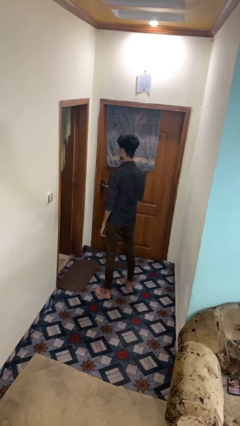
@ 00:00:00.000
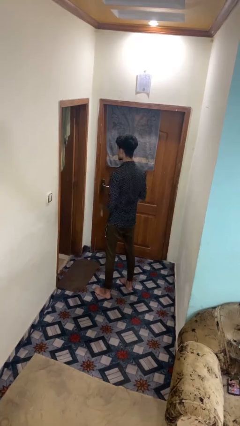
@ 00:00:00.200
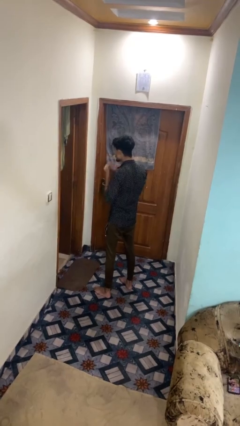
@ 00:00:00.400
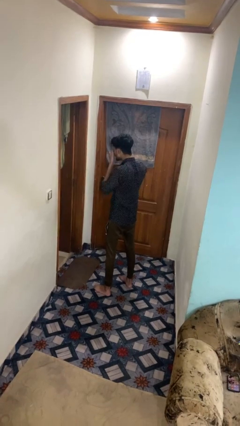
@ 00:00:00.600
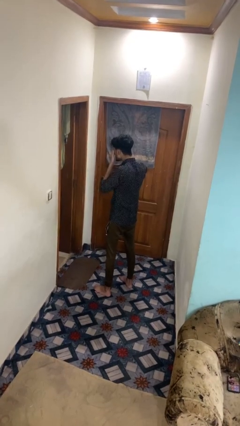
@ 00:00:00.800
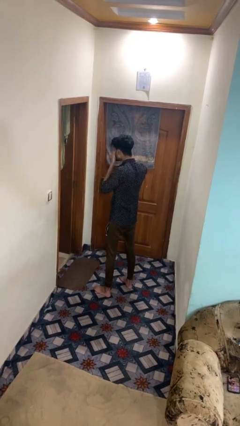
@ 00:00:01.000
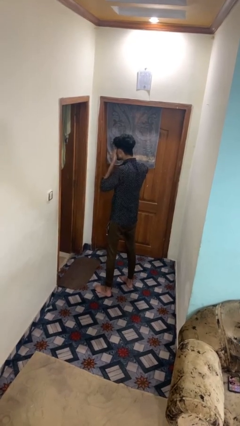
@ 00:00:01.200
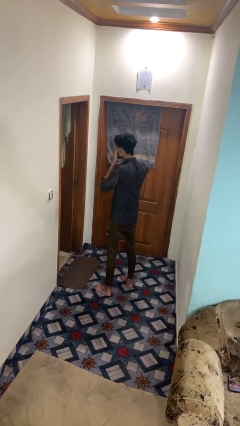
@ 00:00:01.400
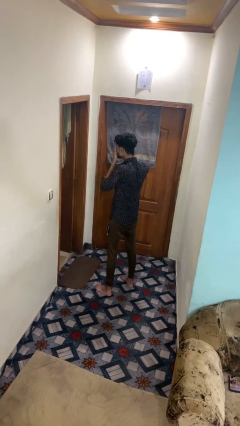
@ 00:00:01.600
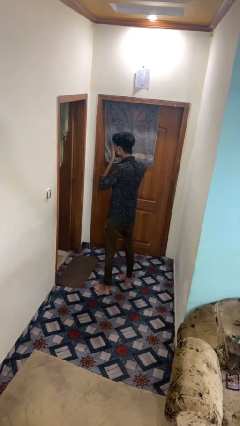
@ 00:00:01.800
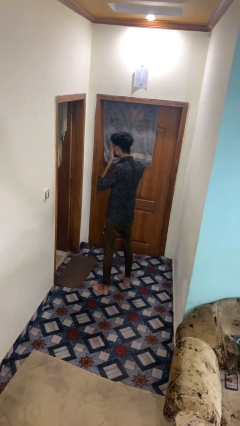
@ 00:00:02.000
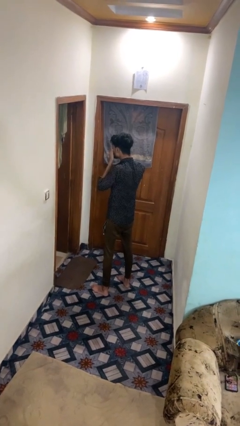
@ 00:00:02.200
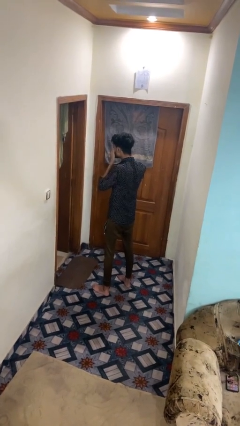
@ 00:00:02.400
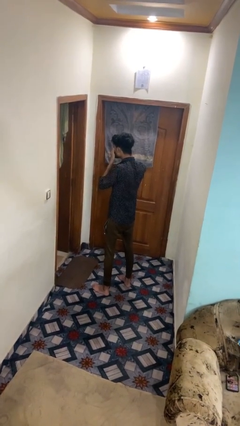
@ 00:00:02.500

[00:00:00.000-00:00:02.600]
person rubs eyes

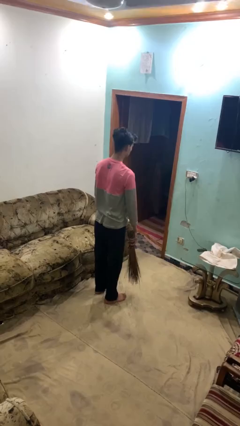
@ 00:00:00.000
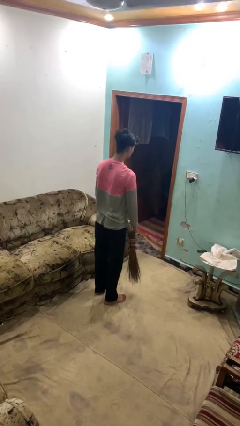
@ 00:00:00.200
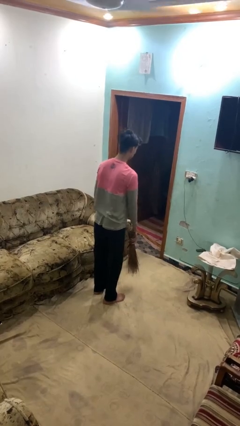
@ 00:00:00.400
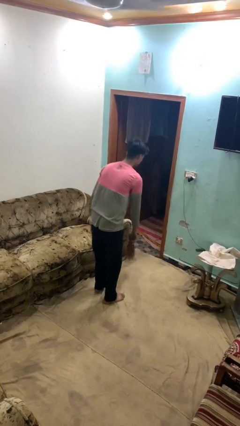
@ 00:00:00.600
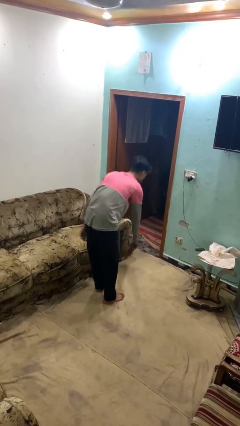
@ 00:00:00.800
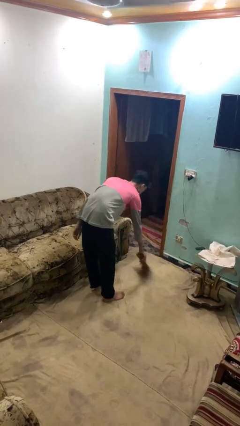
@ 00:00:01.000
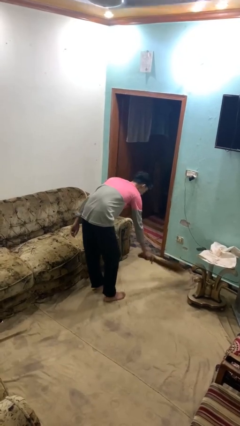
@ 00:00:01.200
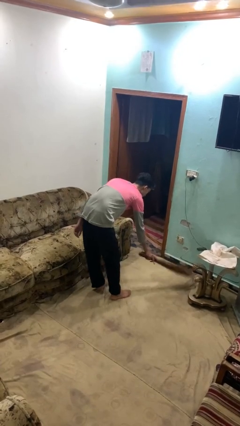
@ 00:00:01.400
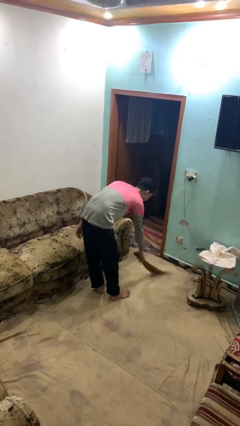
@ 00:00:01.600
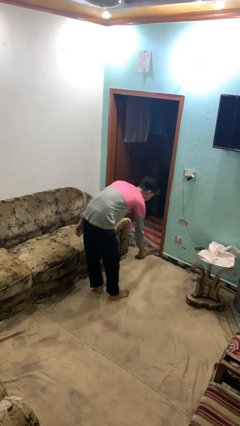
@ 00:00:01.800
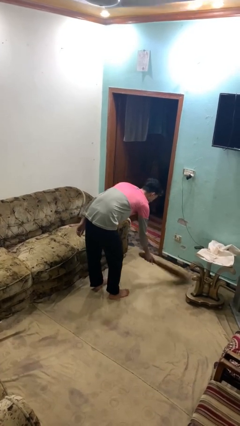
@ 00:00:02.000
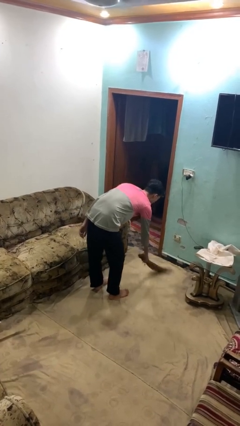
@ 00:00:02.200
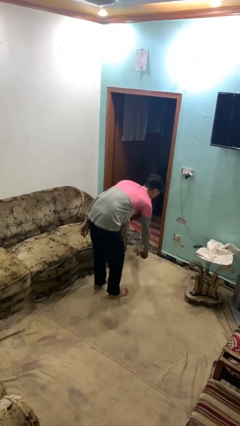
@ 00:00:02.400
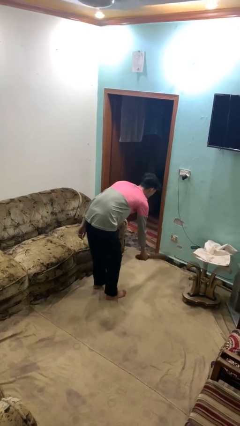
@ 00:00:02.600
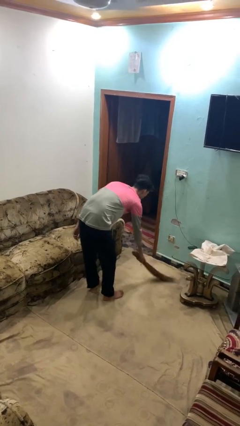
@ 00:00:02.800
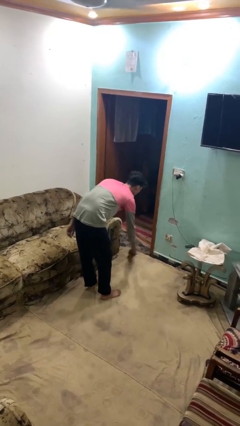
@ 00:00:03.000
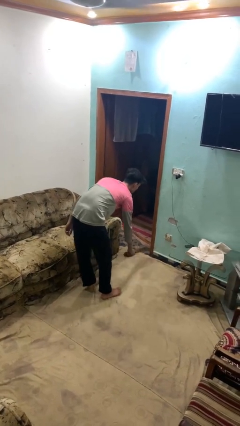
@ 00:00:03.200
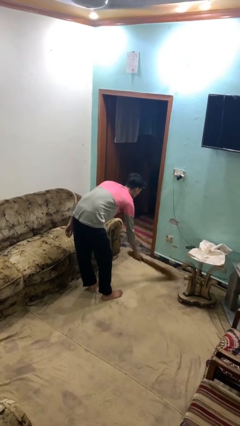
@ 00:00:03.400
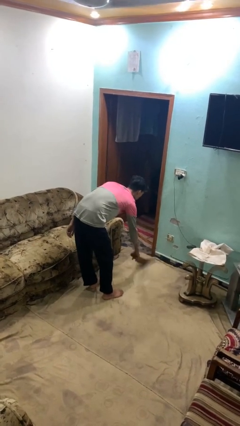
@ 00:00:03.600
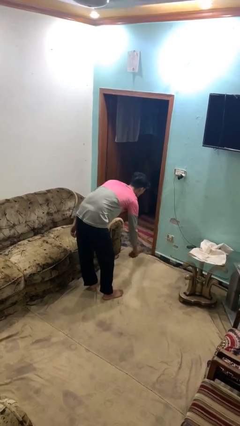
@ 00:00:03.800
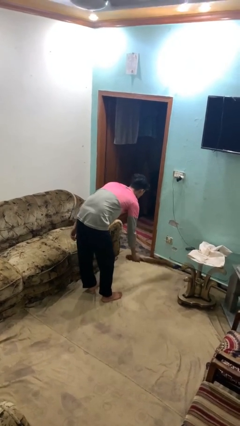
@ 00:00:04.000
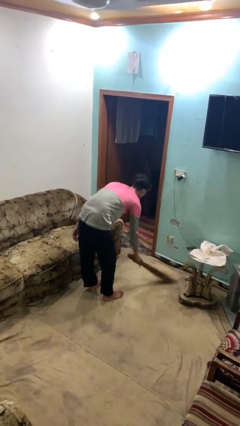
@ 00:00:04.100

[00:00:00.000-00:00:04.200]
person sweeps floor

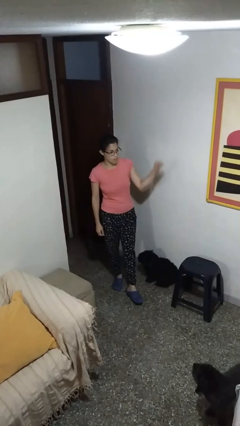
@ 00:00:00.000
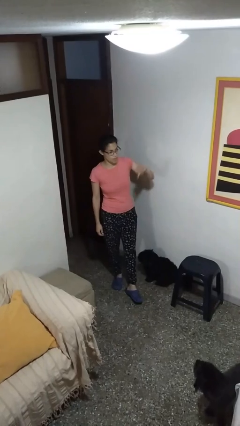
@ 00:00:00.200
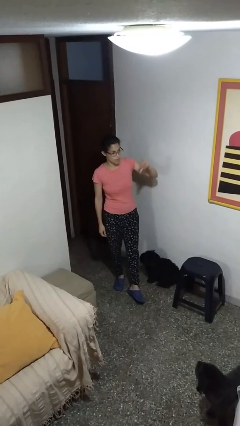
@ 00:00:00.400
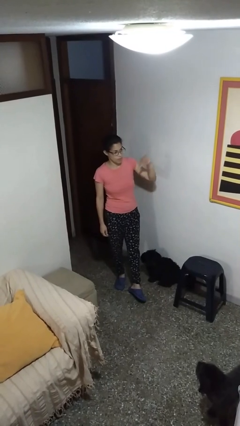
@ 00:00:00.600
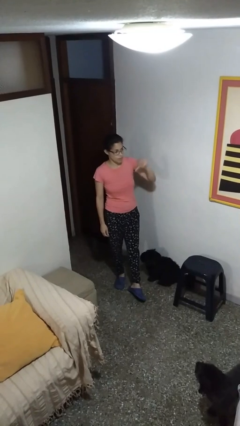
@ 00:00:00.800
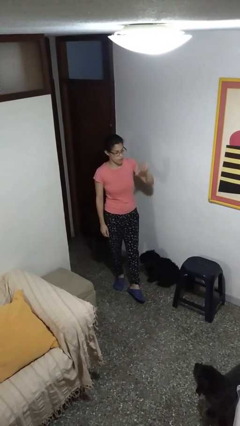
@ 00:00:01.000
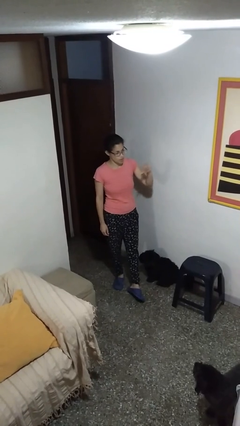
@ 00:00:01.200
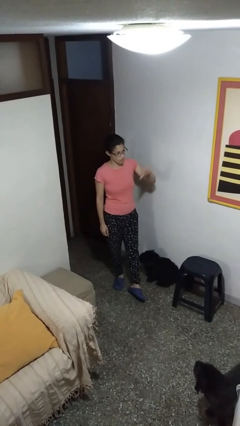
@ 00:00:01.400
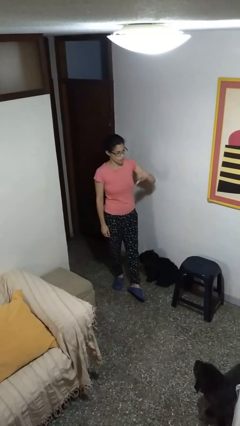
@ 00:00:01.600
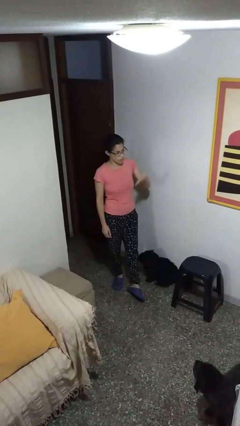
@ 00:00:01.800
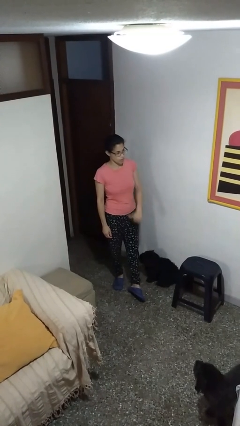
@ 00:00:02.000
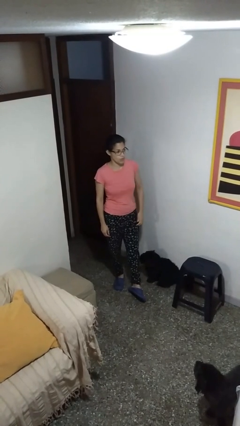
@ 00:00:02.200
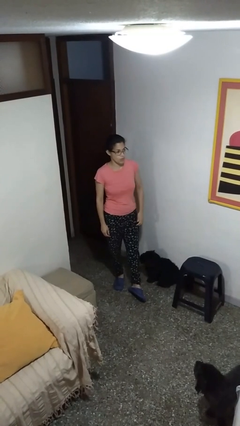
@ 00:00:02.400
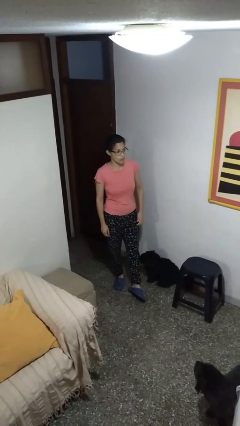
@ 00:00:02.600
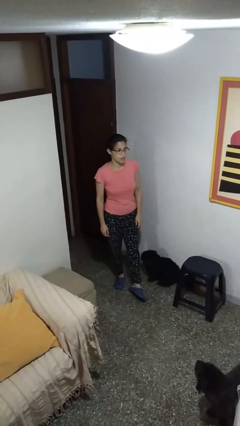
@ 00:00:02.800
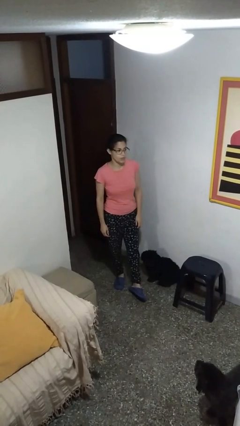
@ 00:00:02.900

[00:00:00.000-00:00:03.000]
person gestures thumbs down

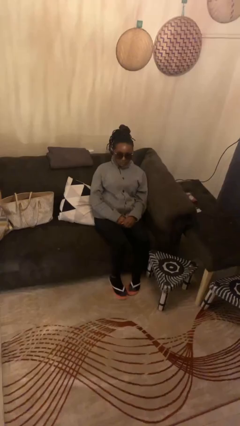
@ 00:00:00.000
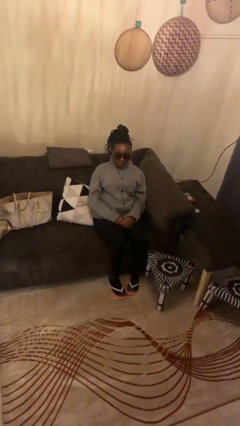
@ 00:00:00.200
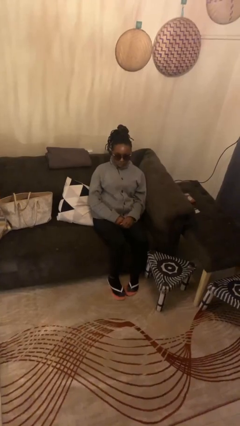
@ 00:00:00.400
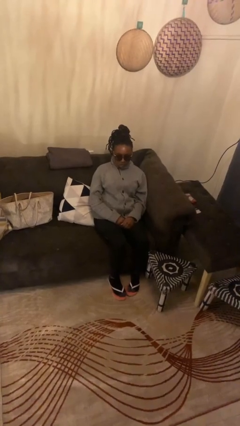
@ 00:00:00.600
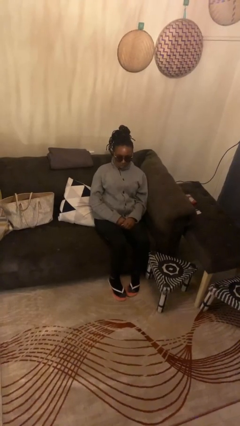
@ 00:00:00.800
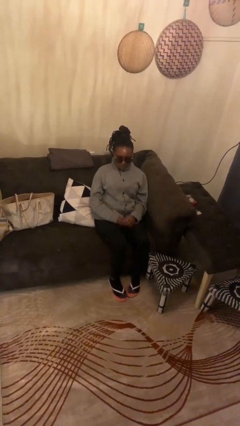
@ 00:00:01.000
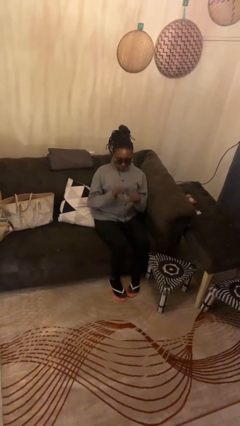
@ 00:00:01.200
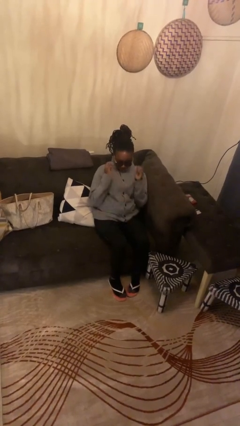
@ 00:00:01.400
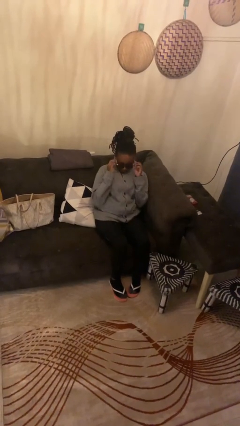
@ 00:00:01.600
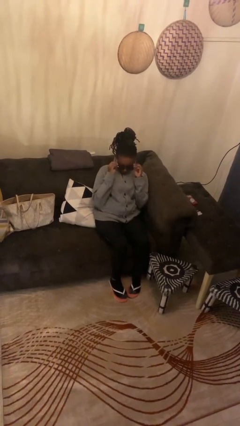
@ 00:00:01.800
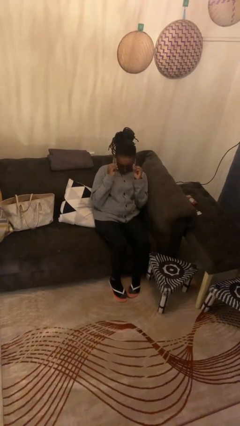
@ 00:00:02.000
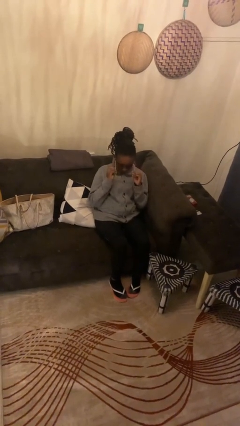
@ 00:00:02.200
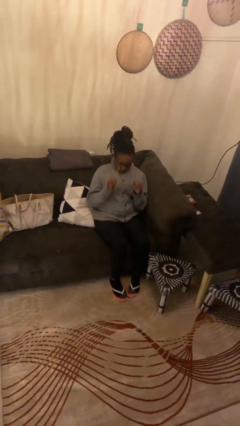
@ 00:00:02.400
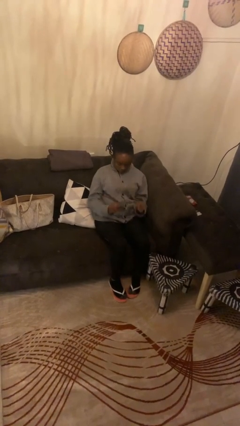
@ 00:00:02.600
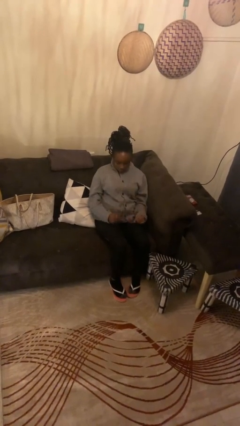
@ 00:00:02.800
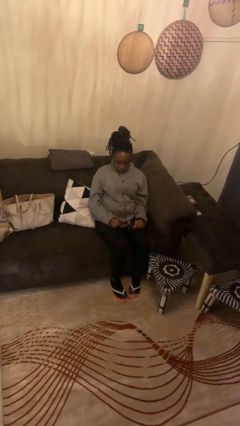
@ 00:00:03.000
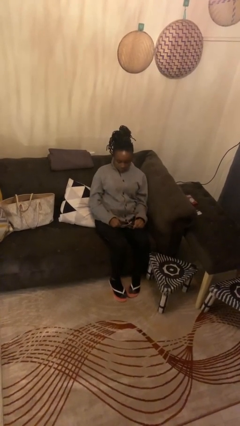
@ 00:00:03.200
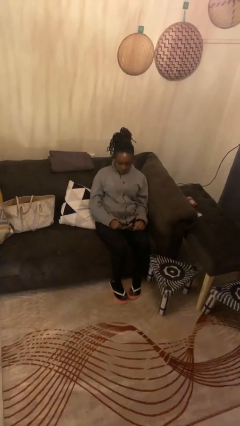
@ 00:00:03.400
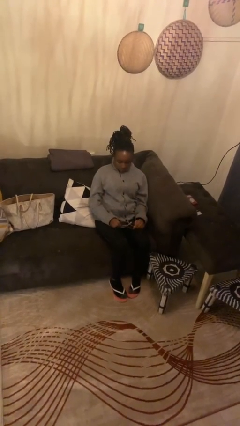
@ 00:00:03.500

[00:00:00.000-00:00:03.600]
person takes off sunglasses

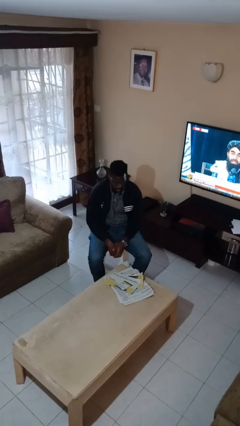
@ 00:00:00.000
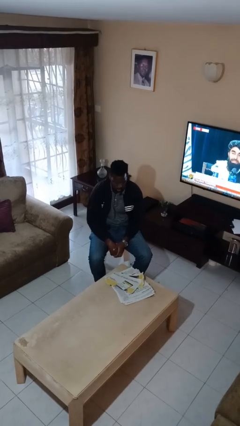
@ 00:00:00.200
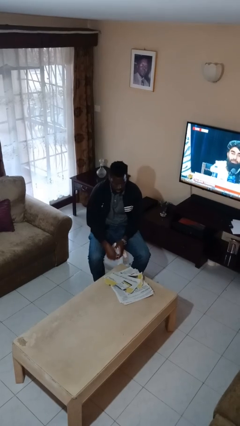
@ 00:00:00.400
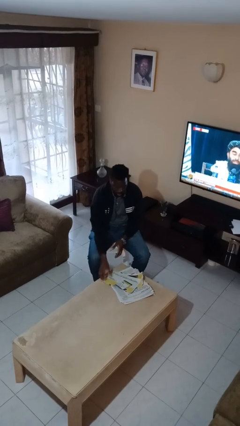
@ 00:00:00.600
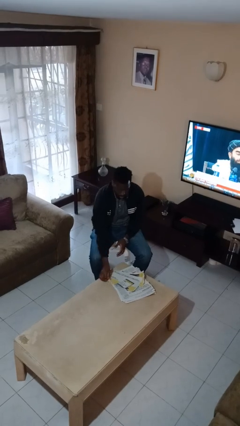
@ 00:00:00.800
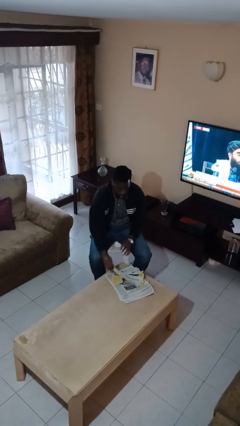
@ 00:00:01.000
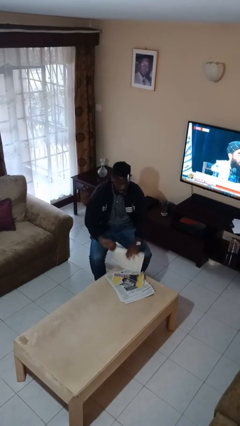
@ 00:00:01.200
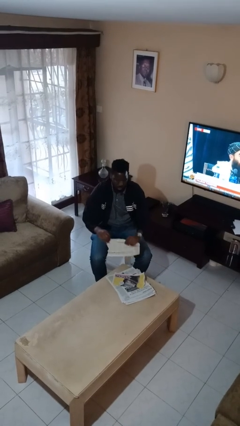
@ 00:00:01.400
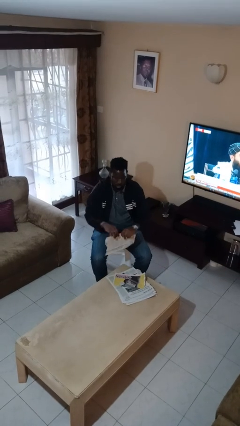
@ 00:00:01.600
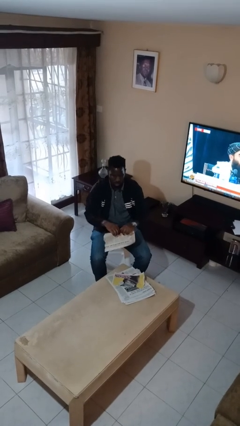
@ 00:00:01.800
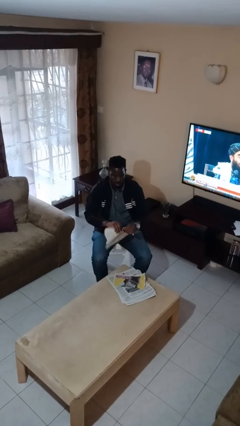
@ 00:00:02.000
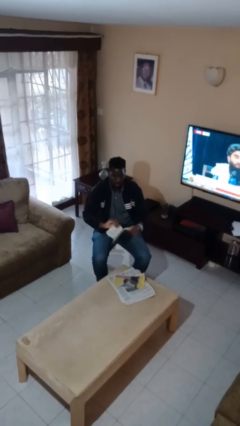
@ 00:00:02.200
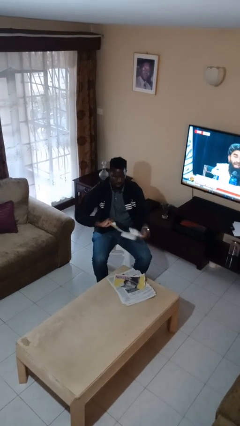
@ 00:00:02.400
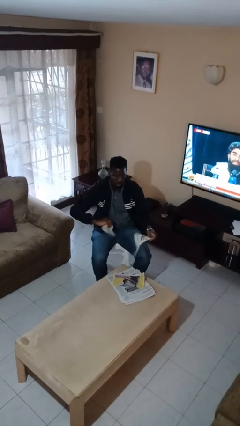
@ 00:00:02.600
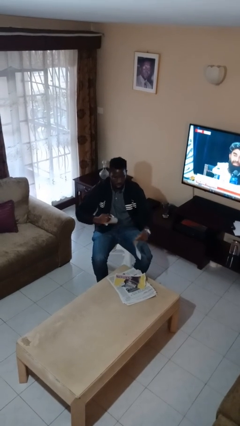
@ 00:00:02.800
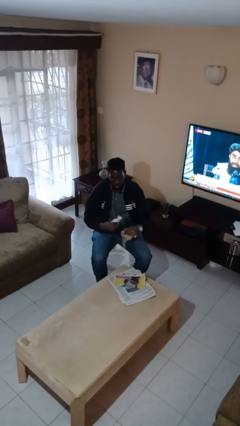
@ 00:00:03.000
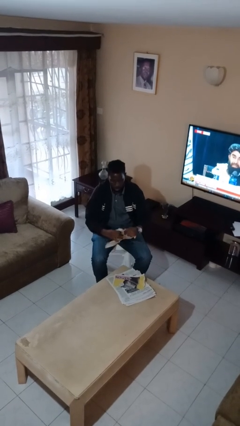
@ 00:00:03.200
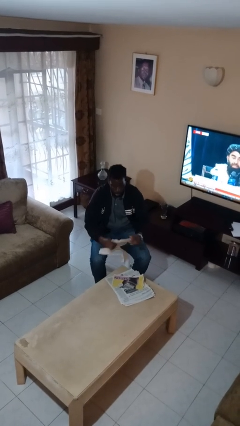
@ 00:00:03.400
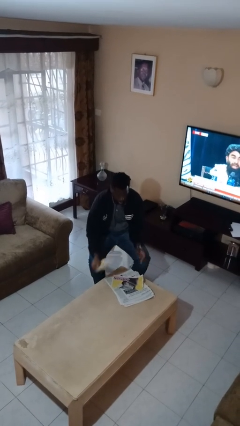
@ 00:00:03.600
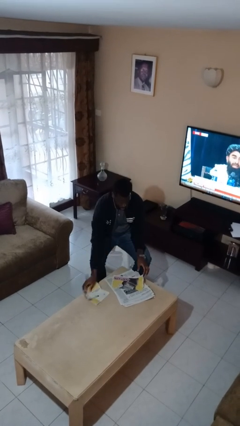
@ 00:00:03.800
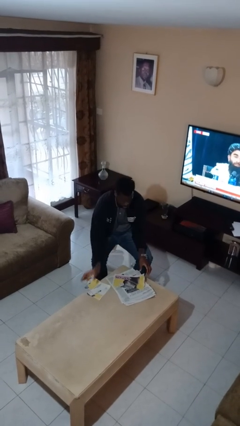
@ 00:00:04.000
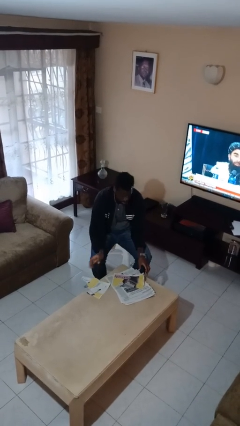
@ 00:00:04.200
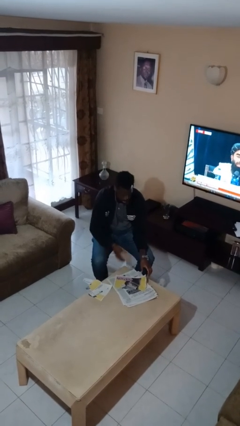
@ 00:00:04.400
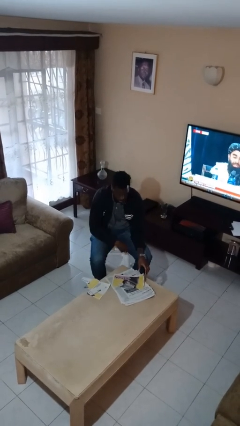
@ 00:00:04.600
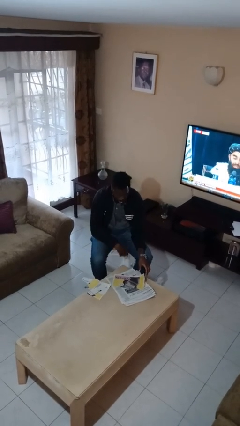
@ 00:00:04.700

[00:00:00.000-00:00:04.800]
person tears paper
